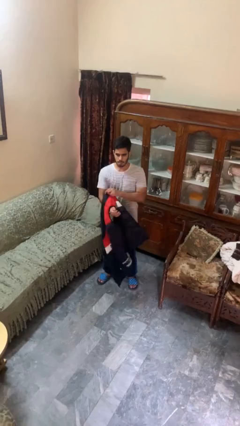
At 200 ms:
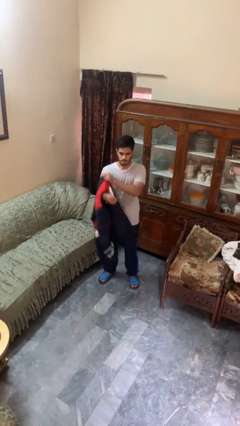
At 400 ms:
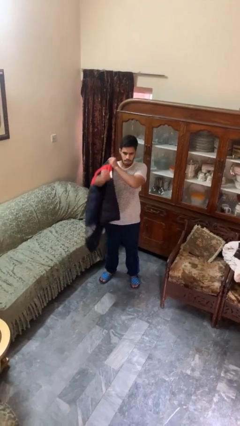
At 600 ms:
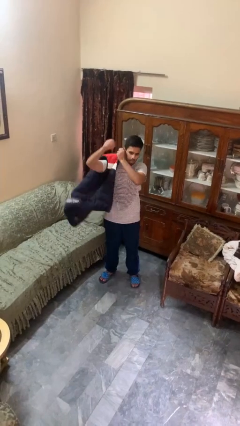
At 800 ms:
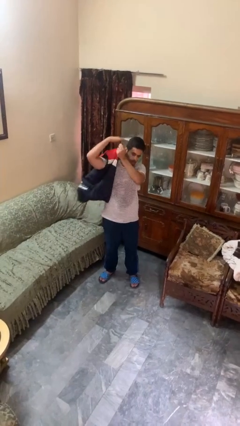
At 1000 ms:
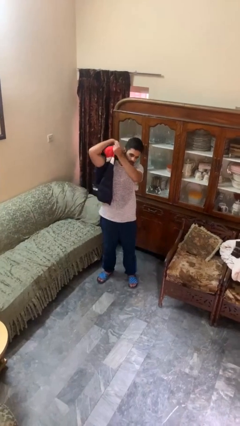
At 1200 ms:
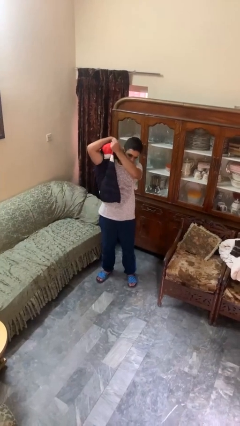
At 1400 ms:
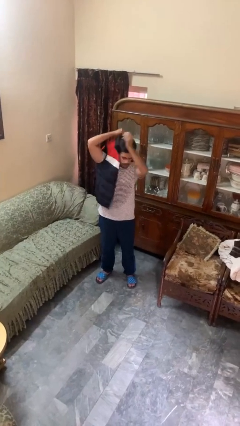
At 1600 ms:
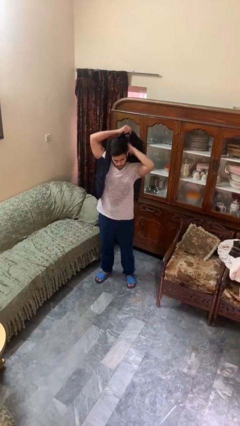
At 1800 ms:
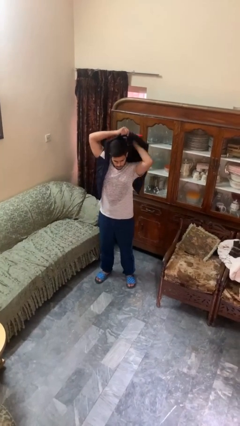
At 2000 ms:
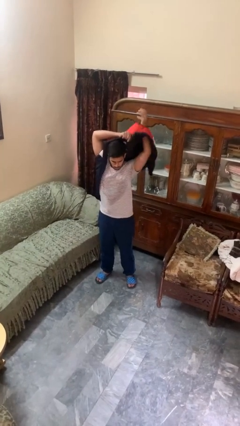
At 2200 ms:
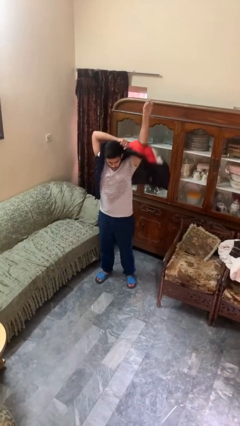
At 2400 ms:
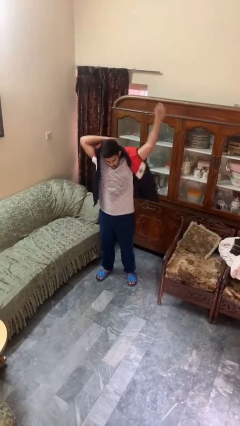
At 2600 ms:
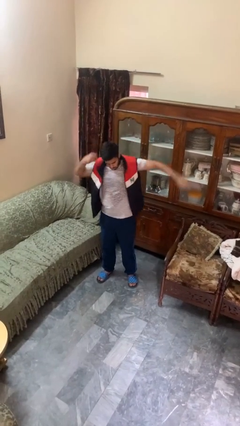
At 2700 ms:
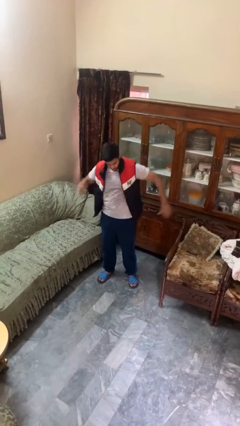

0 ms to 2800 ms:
person puts on jacket

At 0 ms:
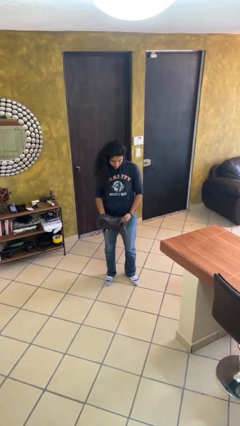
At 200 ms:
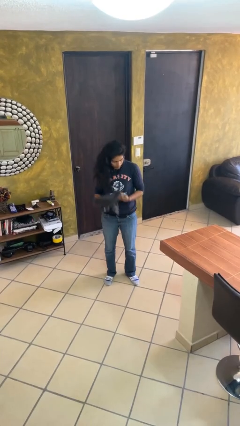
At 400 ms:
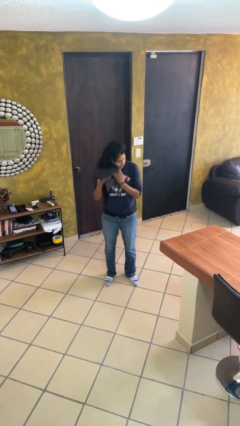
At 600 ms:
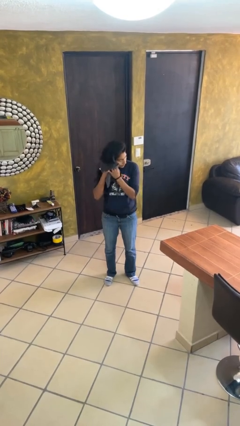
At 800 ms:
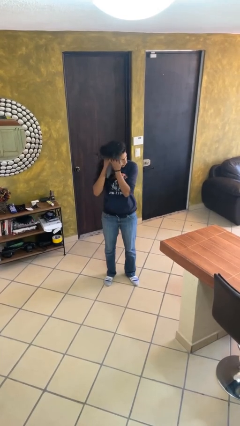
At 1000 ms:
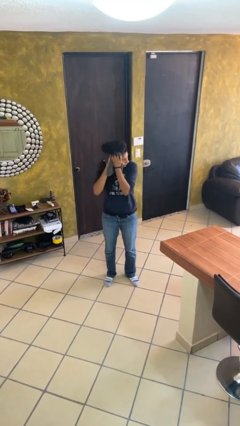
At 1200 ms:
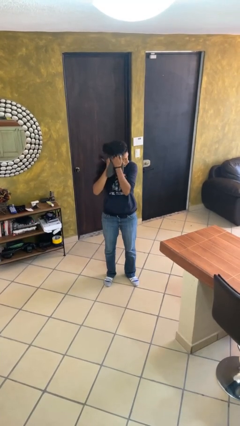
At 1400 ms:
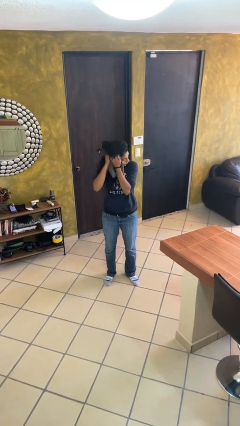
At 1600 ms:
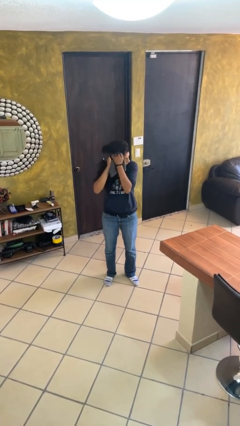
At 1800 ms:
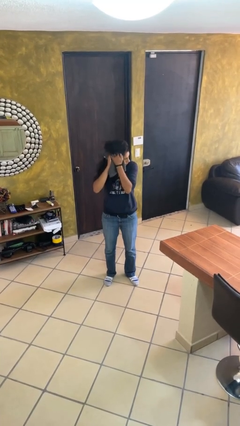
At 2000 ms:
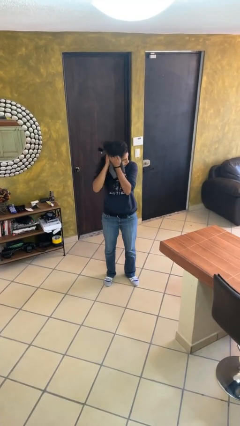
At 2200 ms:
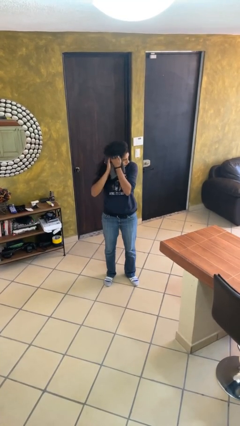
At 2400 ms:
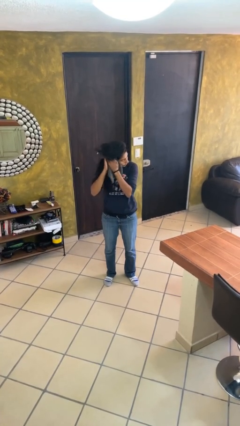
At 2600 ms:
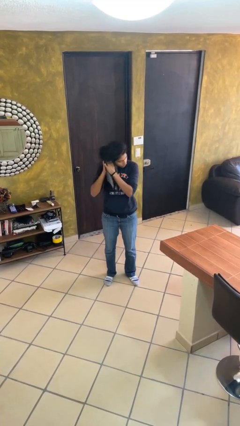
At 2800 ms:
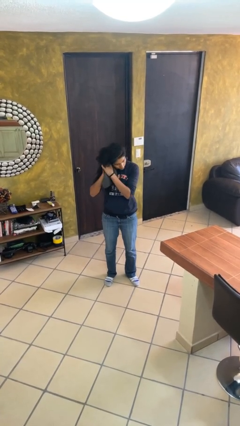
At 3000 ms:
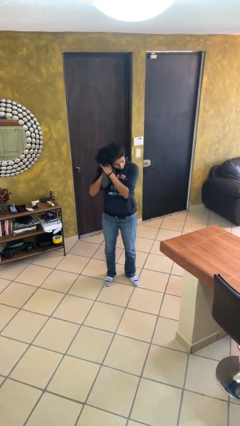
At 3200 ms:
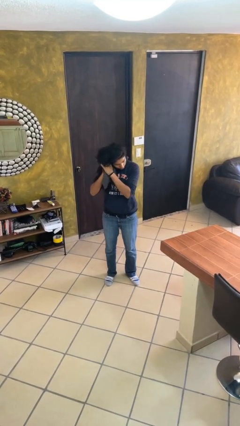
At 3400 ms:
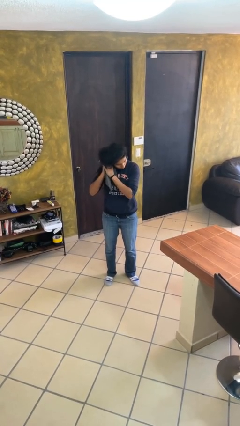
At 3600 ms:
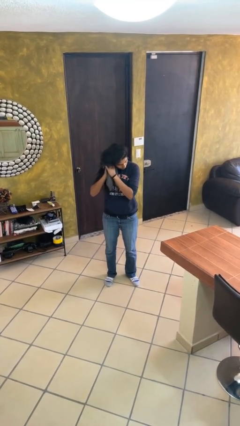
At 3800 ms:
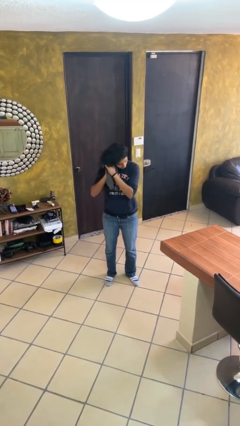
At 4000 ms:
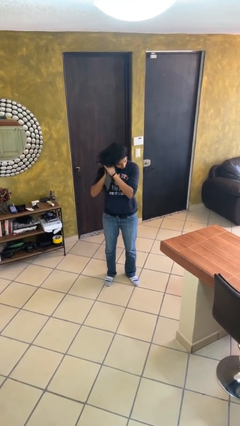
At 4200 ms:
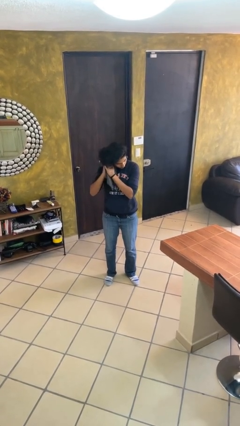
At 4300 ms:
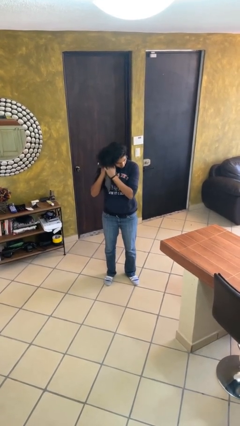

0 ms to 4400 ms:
person dries hair with towel

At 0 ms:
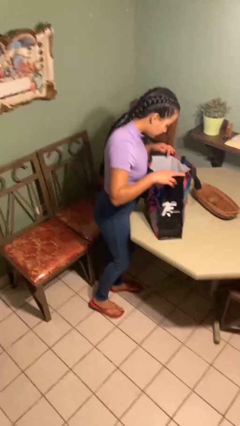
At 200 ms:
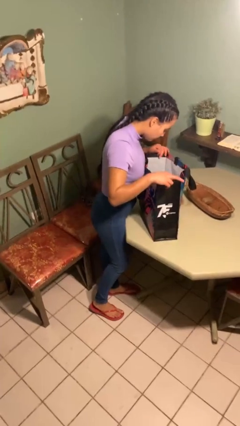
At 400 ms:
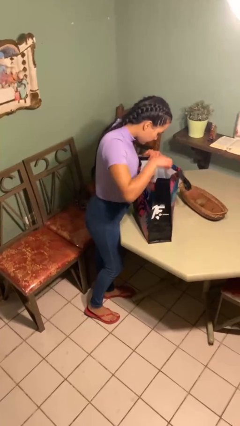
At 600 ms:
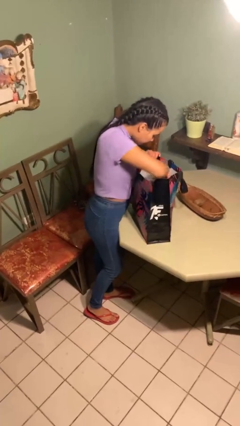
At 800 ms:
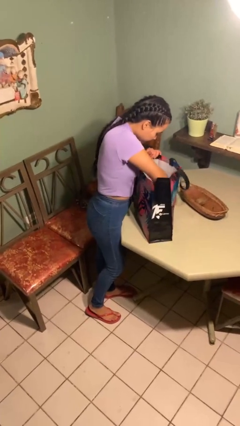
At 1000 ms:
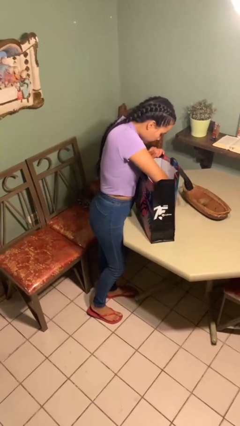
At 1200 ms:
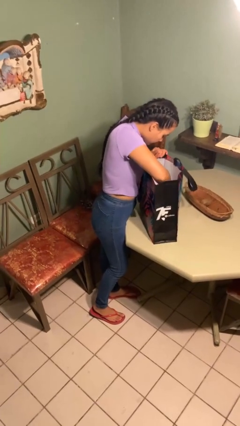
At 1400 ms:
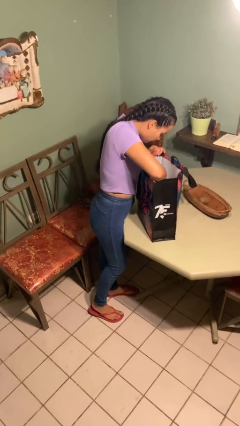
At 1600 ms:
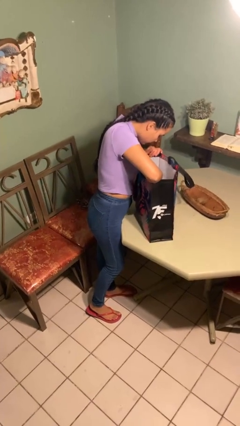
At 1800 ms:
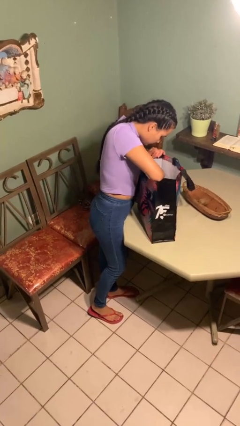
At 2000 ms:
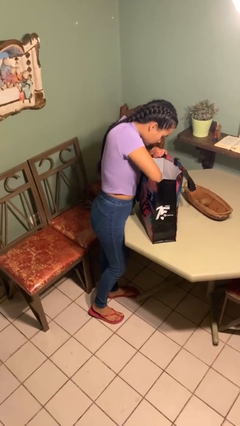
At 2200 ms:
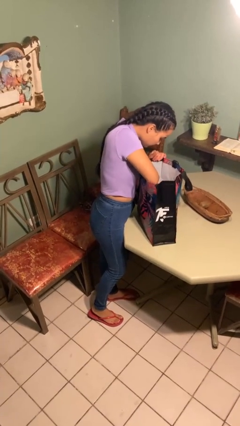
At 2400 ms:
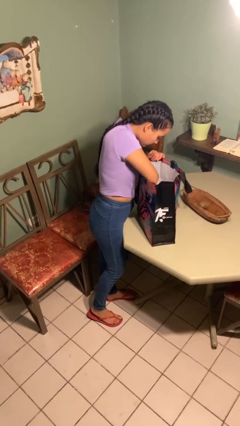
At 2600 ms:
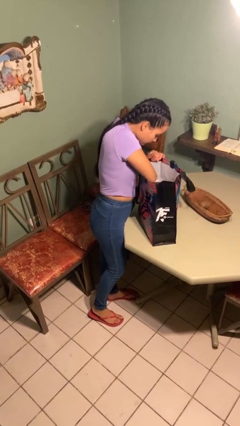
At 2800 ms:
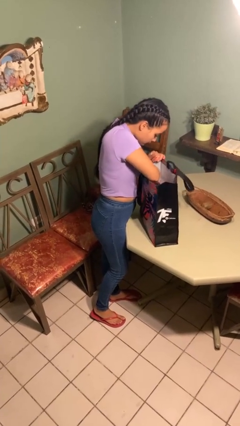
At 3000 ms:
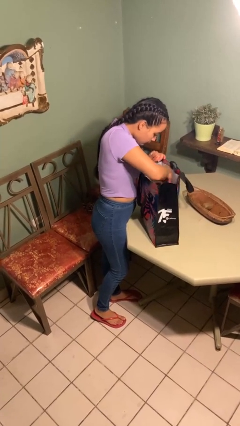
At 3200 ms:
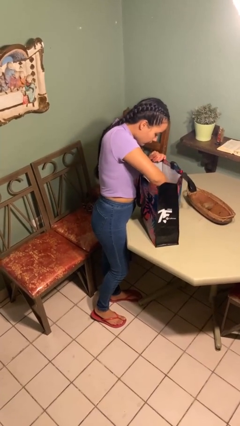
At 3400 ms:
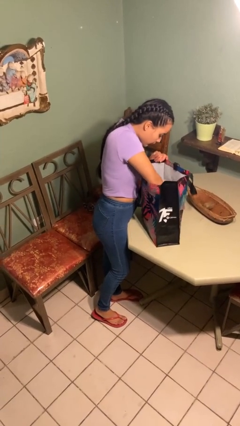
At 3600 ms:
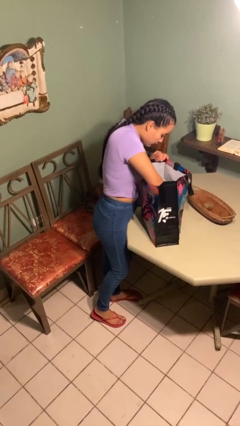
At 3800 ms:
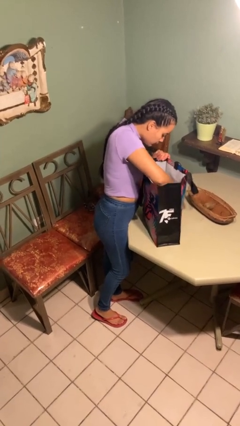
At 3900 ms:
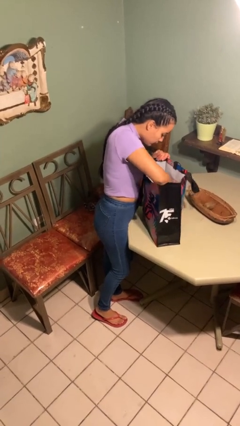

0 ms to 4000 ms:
person searches in bag

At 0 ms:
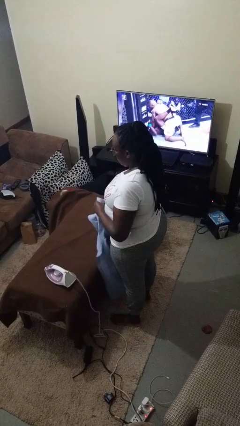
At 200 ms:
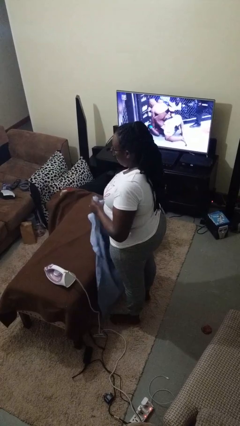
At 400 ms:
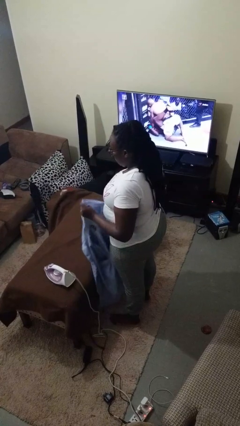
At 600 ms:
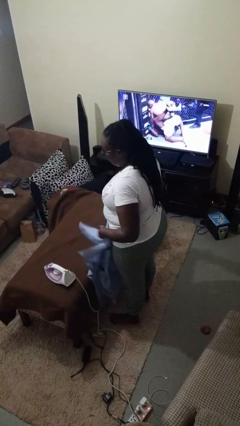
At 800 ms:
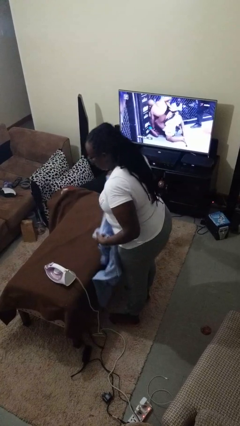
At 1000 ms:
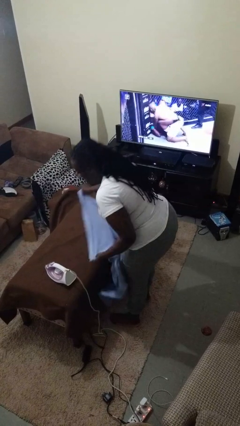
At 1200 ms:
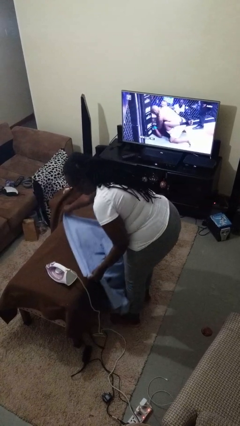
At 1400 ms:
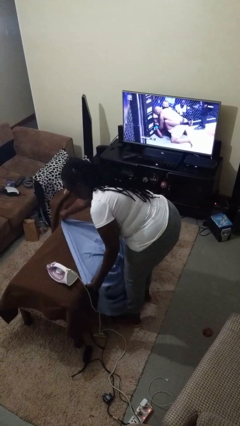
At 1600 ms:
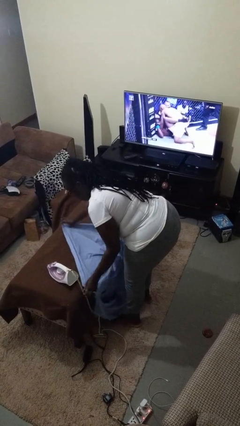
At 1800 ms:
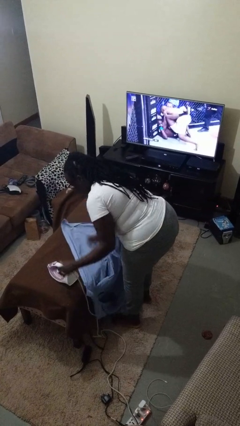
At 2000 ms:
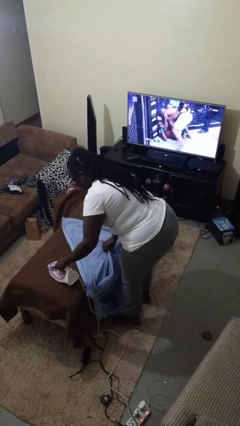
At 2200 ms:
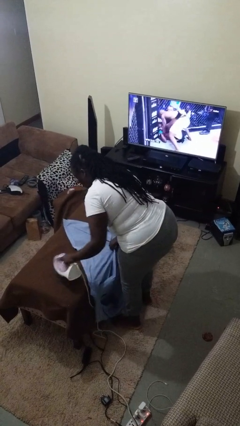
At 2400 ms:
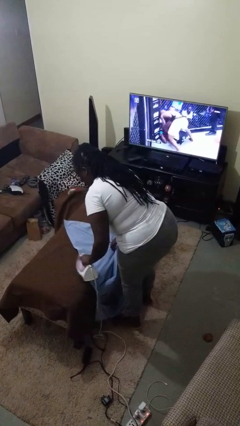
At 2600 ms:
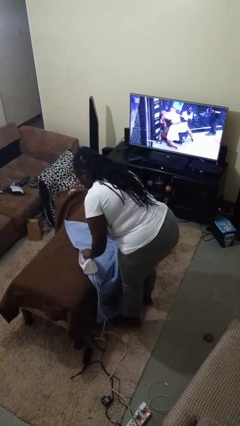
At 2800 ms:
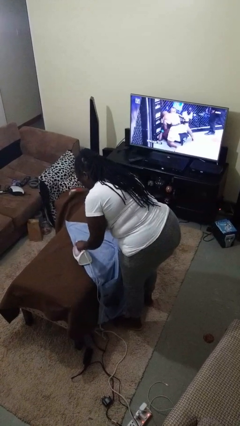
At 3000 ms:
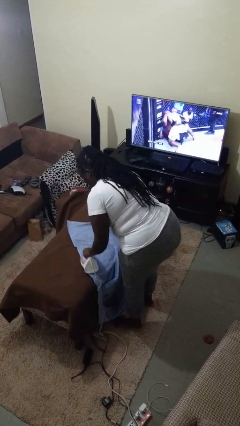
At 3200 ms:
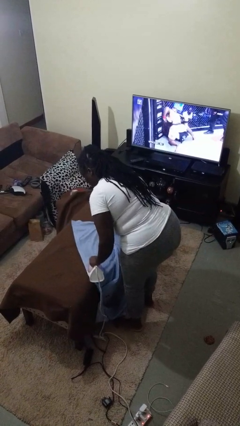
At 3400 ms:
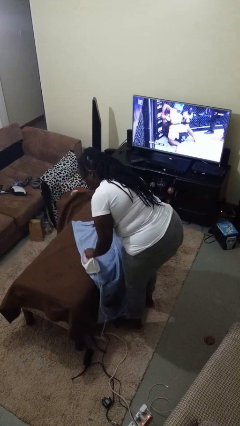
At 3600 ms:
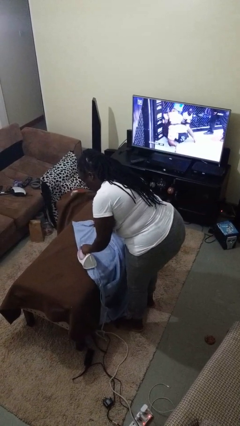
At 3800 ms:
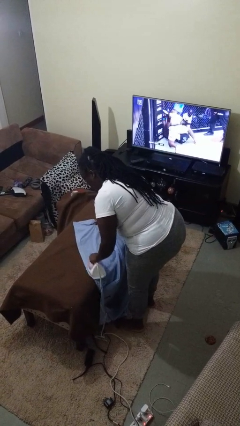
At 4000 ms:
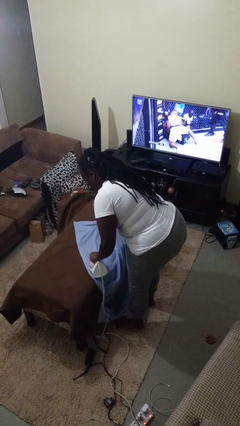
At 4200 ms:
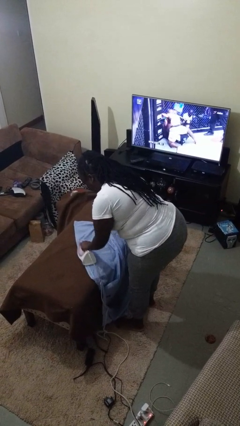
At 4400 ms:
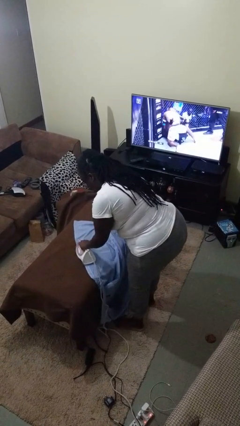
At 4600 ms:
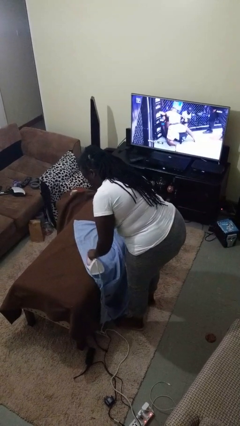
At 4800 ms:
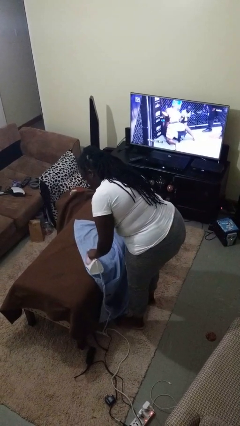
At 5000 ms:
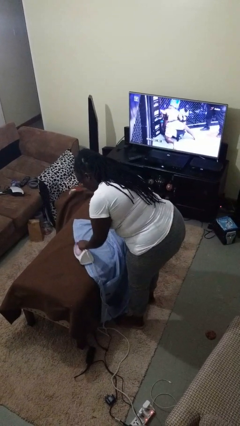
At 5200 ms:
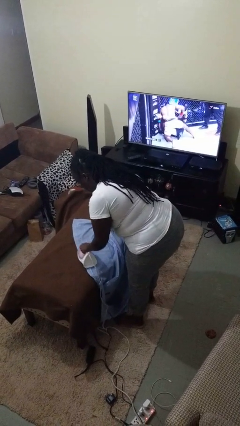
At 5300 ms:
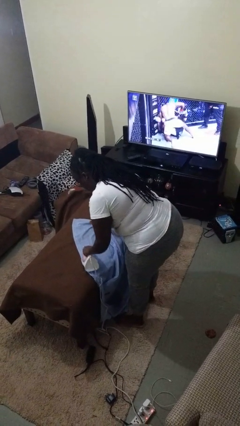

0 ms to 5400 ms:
person irons clothes

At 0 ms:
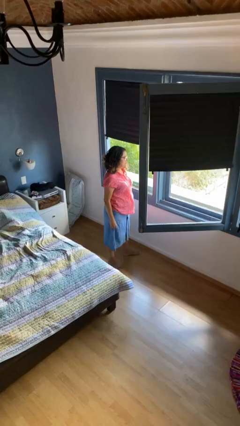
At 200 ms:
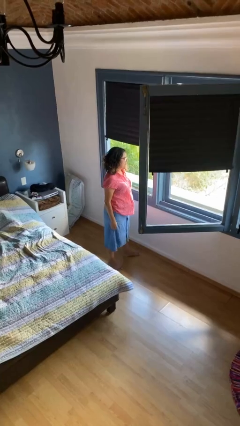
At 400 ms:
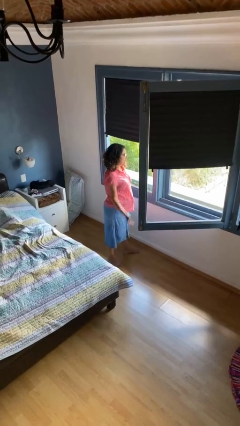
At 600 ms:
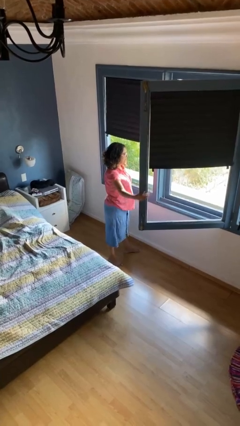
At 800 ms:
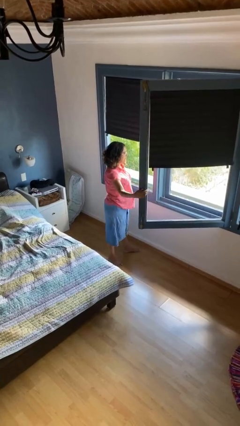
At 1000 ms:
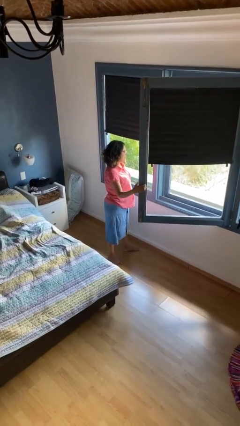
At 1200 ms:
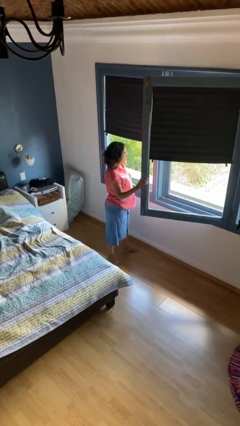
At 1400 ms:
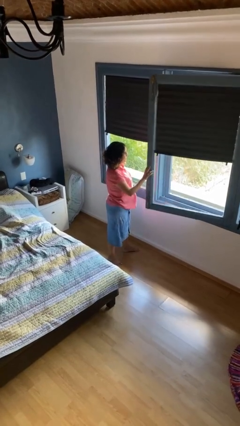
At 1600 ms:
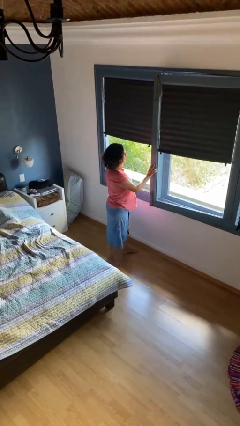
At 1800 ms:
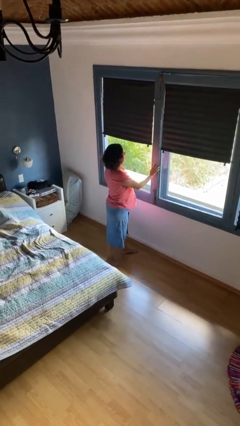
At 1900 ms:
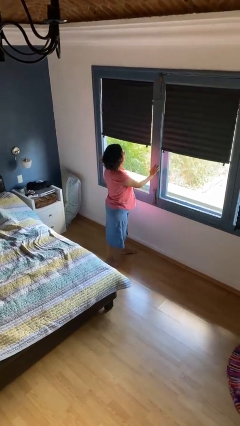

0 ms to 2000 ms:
person closes home window
